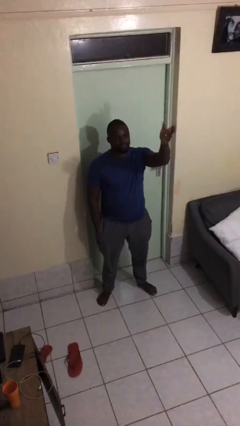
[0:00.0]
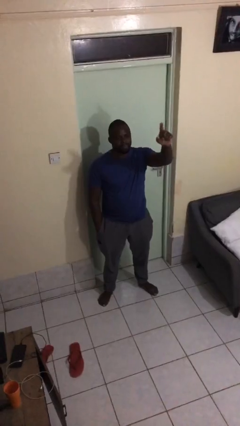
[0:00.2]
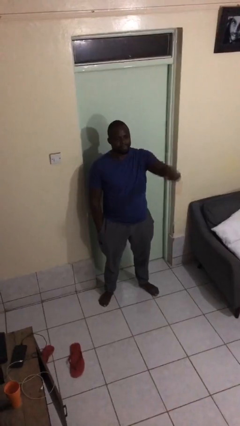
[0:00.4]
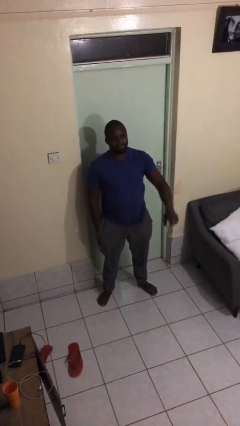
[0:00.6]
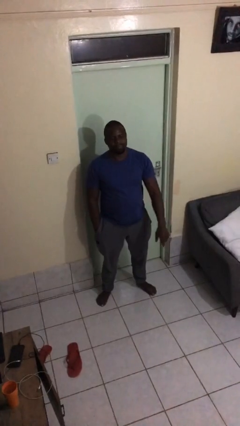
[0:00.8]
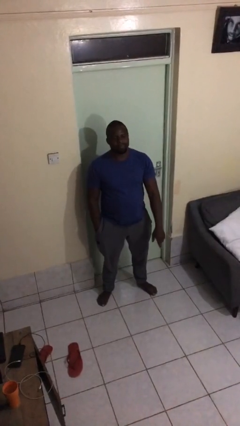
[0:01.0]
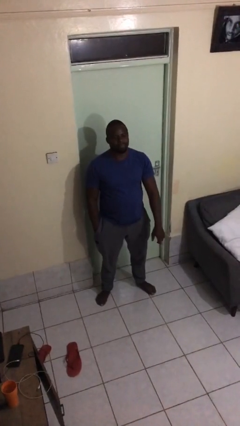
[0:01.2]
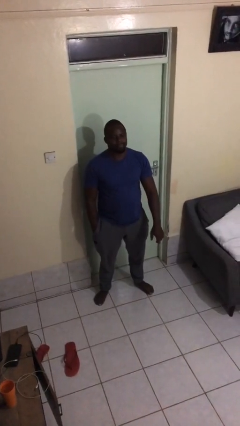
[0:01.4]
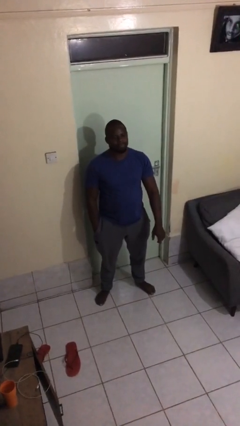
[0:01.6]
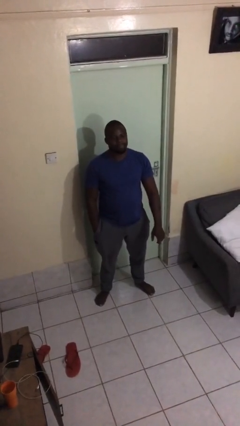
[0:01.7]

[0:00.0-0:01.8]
person gestures swipe down

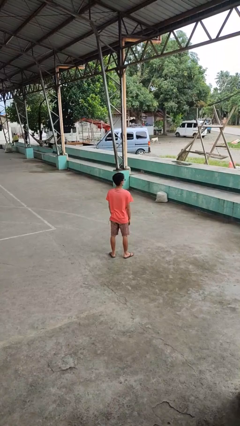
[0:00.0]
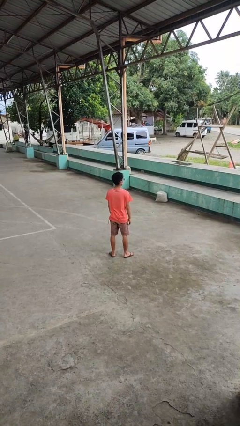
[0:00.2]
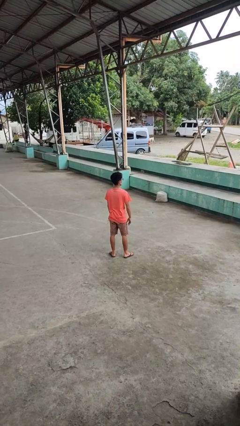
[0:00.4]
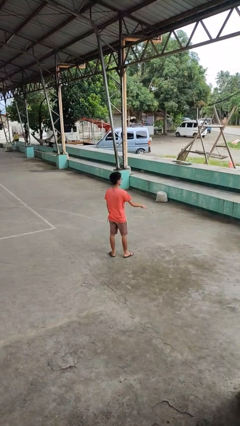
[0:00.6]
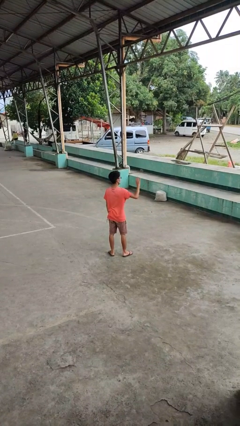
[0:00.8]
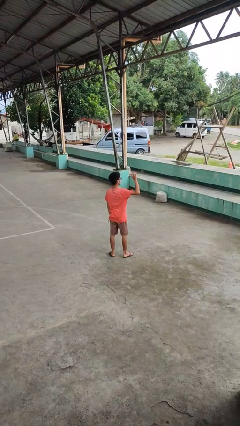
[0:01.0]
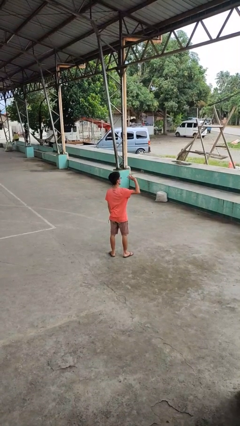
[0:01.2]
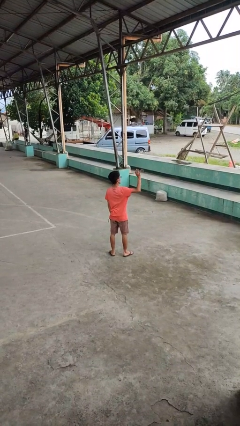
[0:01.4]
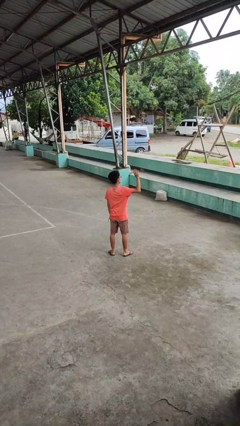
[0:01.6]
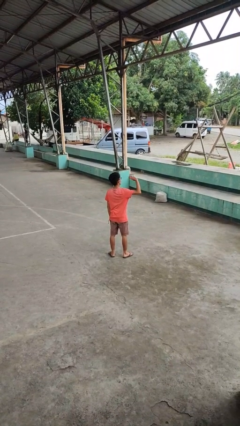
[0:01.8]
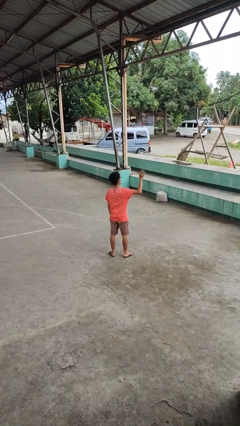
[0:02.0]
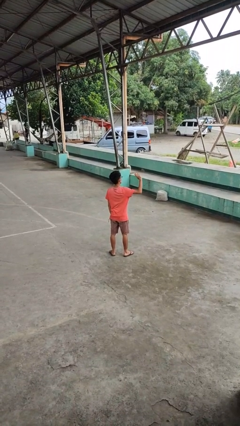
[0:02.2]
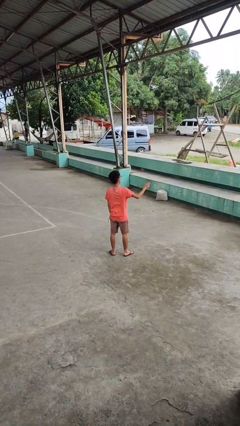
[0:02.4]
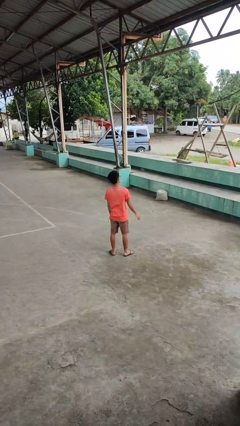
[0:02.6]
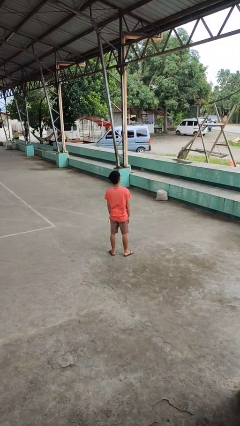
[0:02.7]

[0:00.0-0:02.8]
person waves at person

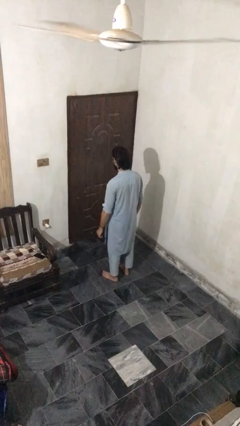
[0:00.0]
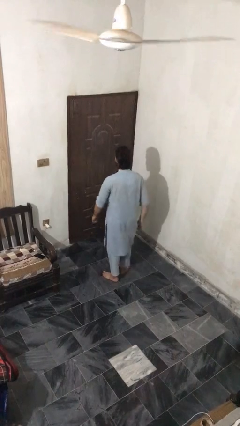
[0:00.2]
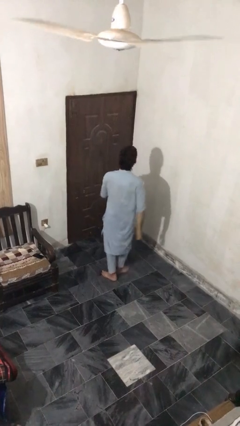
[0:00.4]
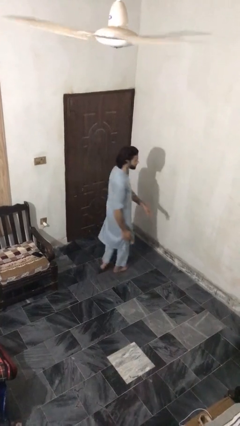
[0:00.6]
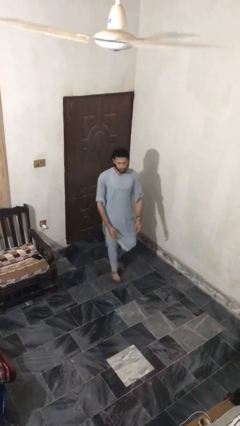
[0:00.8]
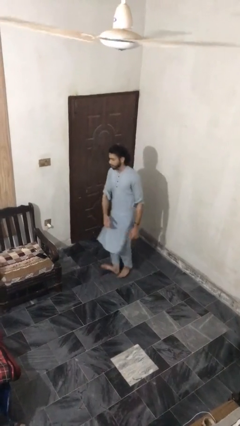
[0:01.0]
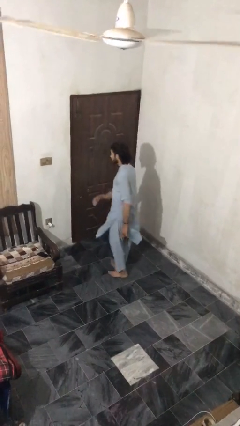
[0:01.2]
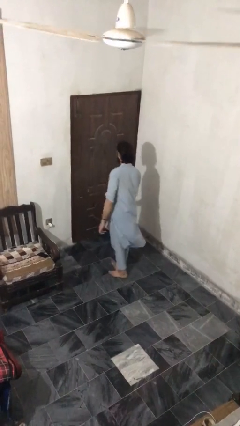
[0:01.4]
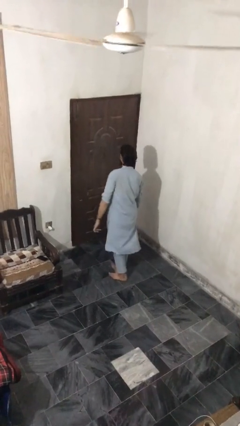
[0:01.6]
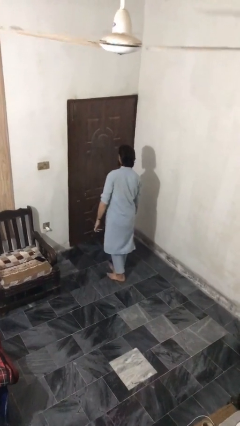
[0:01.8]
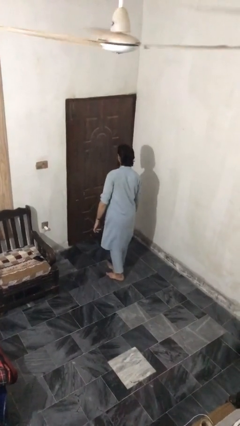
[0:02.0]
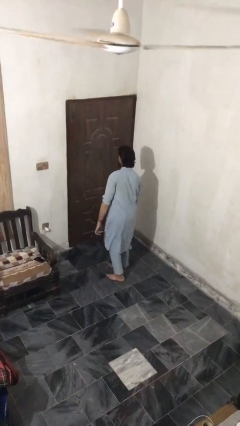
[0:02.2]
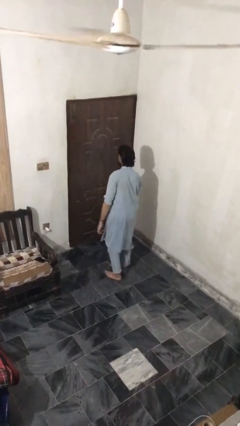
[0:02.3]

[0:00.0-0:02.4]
person twirls

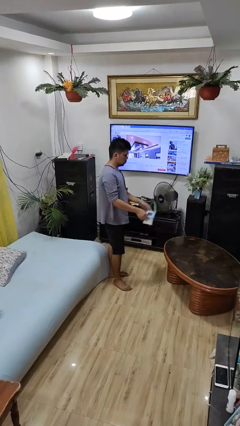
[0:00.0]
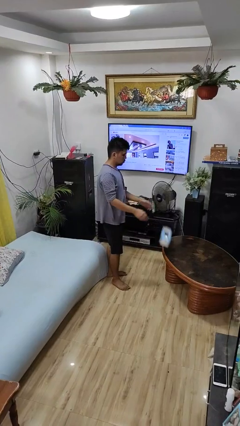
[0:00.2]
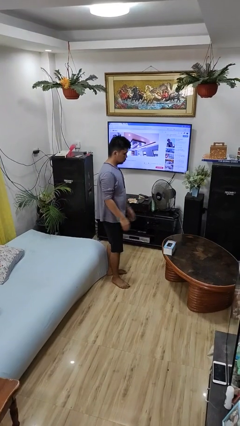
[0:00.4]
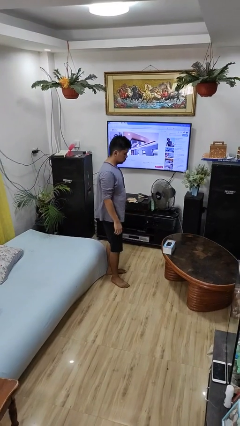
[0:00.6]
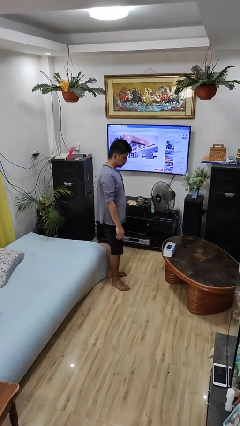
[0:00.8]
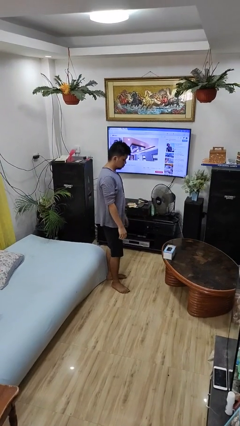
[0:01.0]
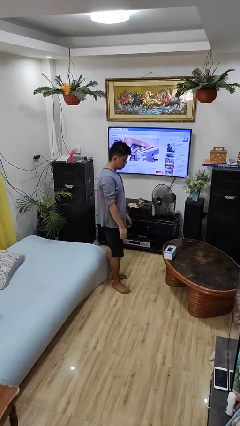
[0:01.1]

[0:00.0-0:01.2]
person throws object on table

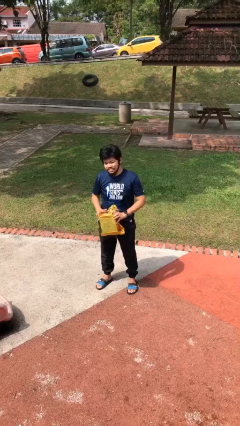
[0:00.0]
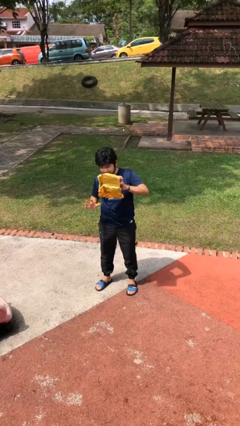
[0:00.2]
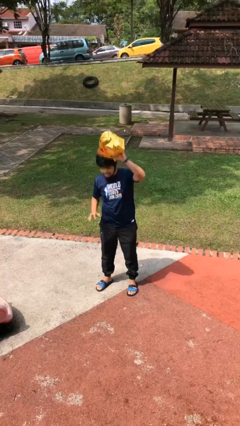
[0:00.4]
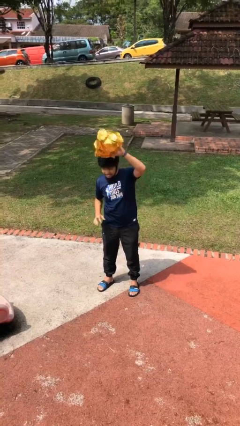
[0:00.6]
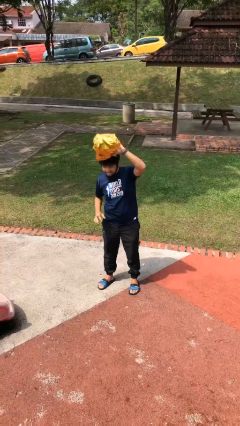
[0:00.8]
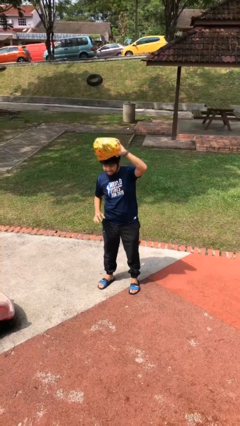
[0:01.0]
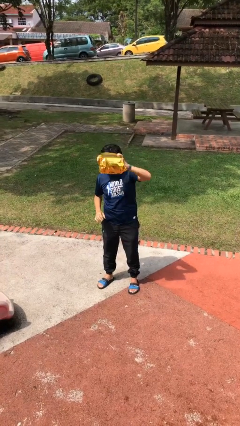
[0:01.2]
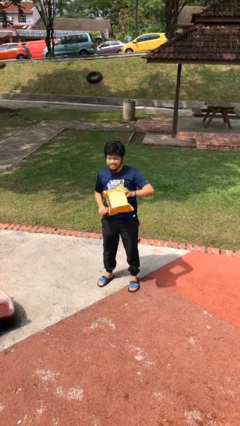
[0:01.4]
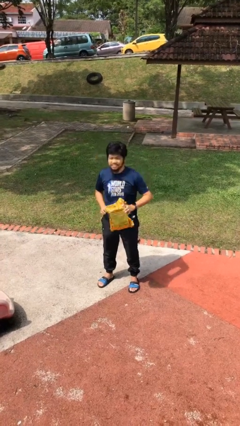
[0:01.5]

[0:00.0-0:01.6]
person holds object above head

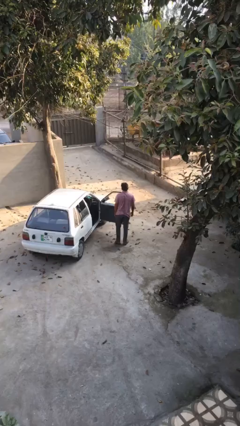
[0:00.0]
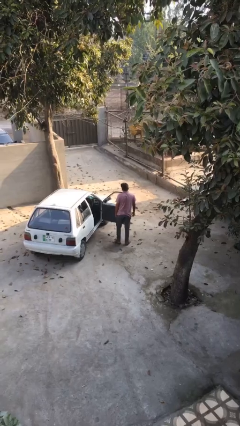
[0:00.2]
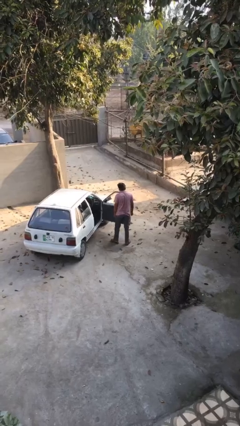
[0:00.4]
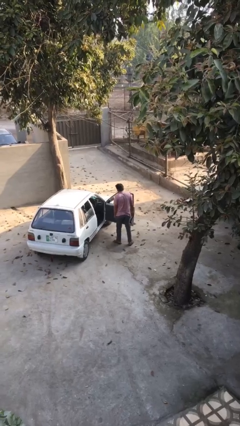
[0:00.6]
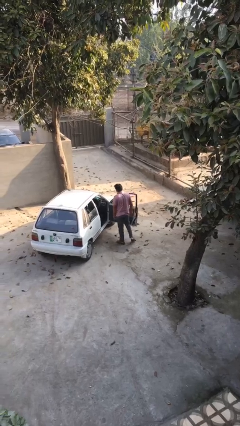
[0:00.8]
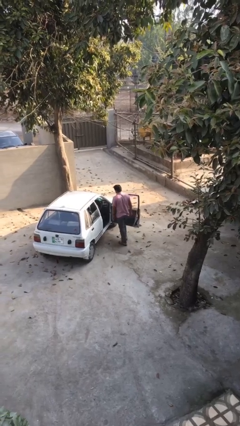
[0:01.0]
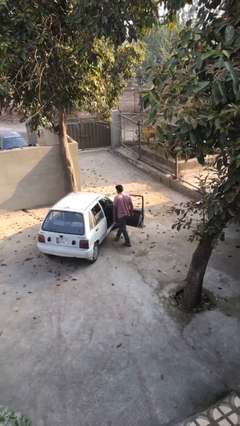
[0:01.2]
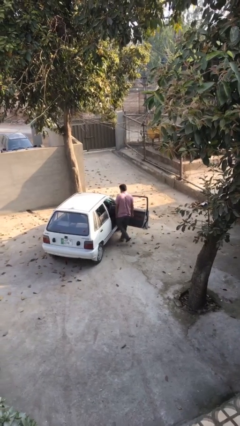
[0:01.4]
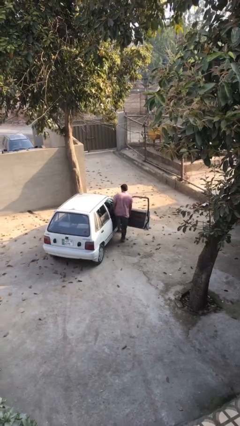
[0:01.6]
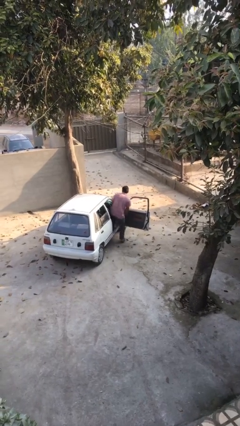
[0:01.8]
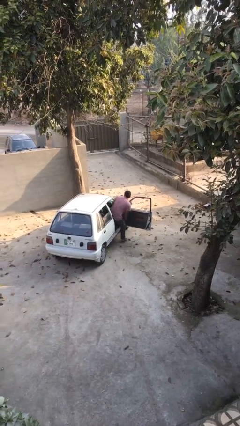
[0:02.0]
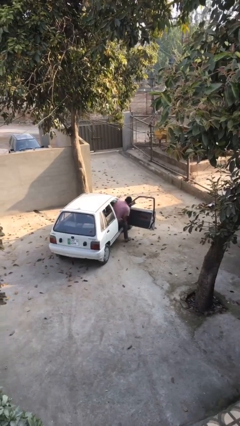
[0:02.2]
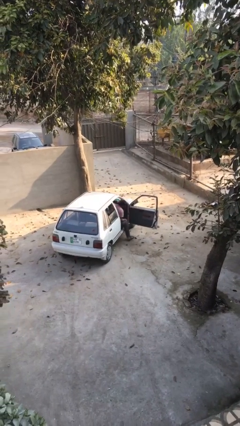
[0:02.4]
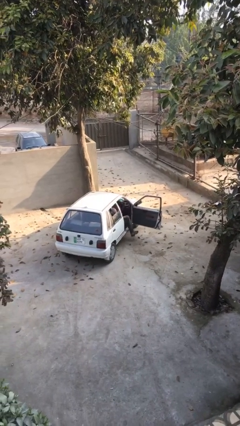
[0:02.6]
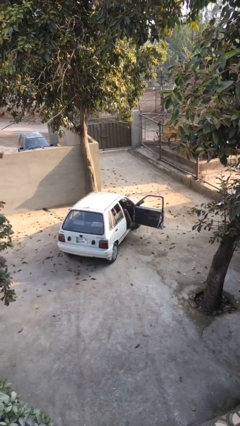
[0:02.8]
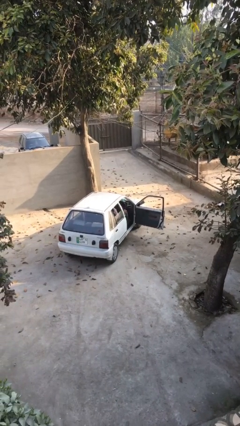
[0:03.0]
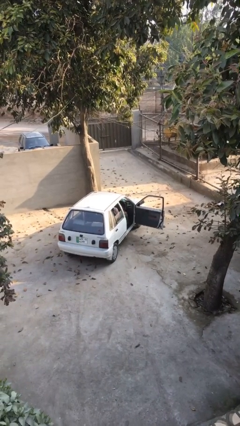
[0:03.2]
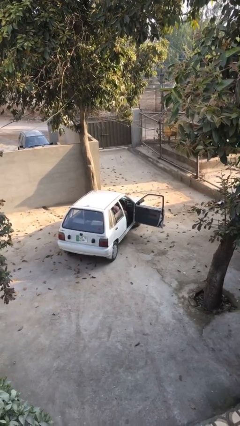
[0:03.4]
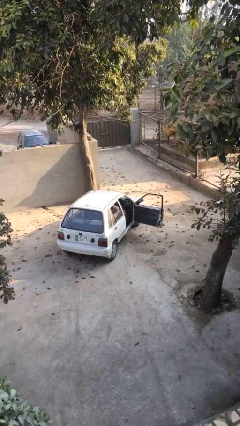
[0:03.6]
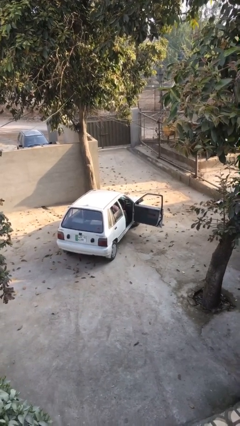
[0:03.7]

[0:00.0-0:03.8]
person enters car

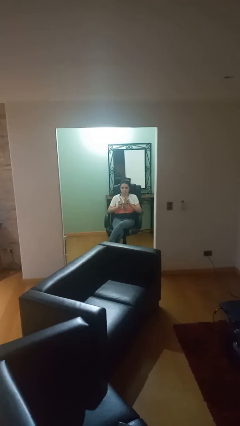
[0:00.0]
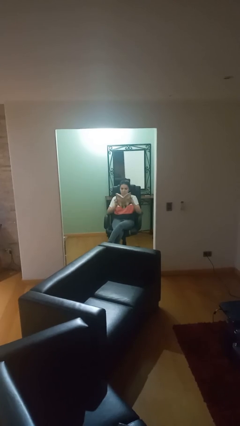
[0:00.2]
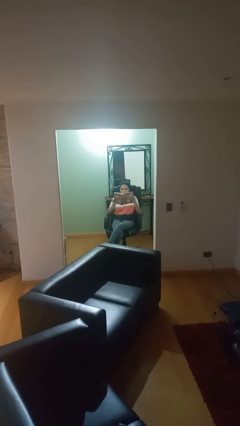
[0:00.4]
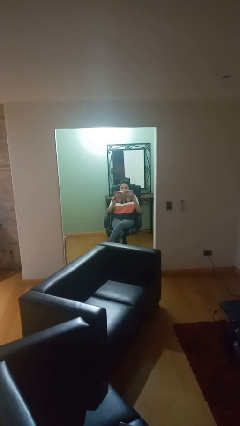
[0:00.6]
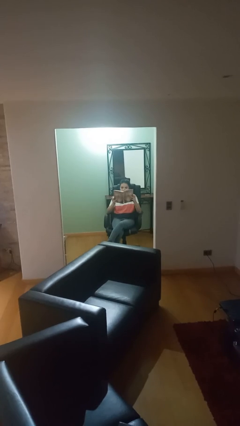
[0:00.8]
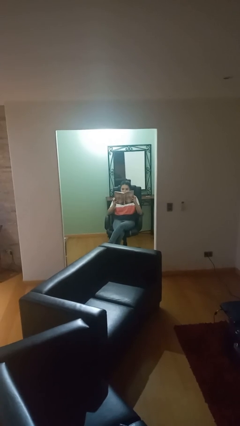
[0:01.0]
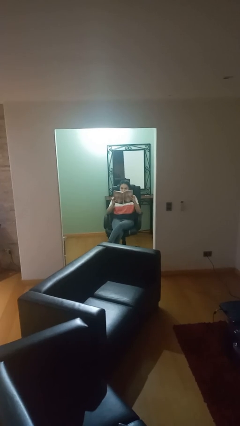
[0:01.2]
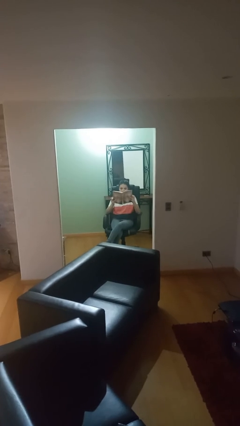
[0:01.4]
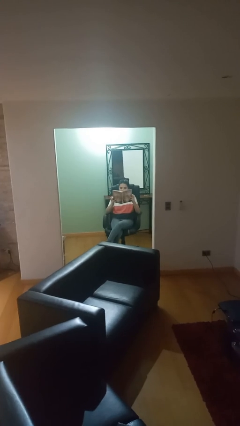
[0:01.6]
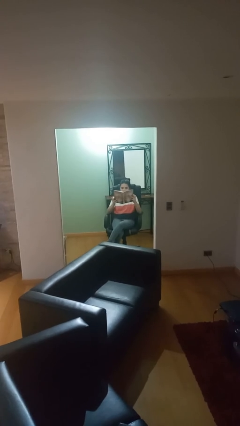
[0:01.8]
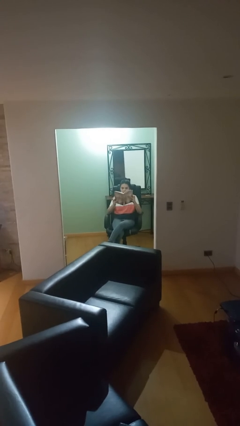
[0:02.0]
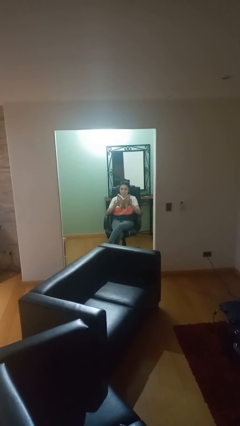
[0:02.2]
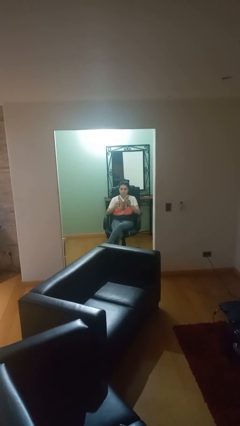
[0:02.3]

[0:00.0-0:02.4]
person reads document

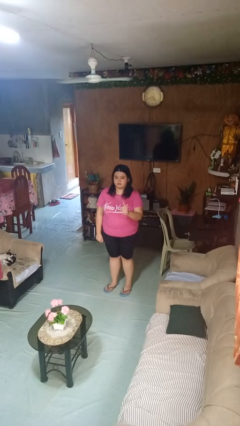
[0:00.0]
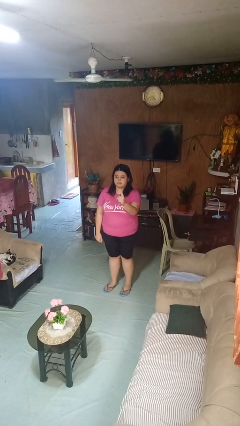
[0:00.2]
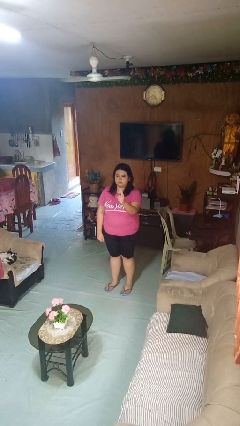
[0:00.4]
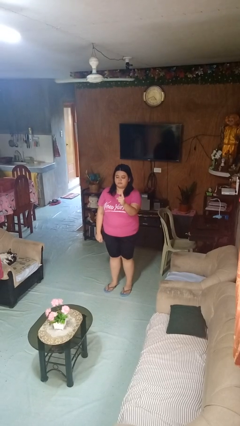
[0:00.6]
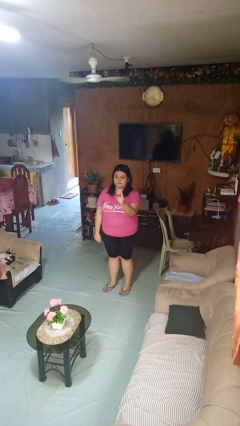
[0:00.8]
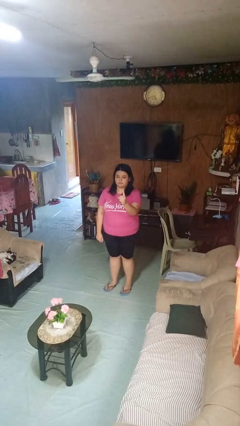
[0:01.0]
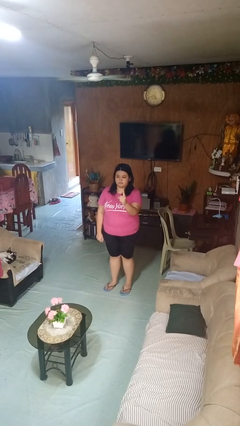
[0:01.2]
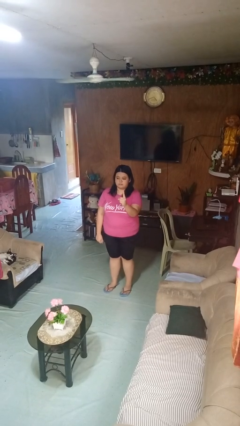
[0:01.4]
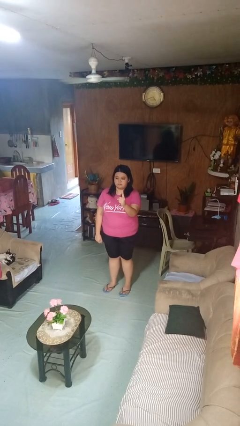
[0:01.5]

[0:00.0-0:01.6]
person gestures number one
